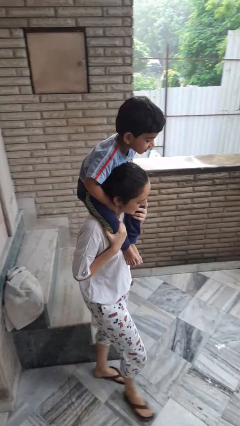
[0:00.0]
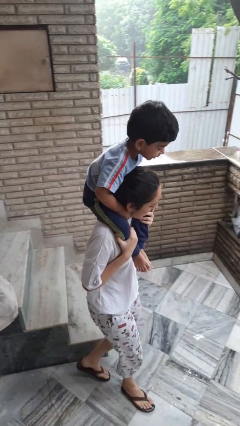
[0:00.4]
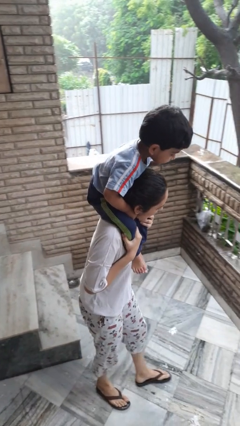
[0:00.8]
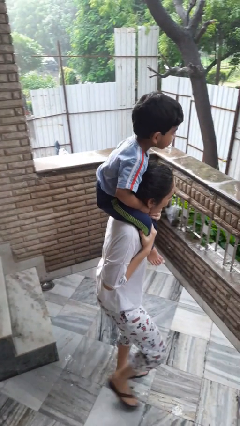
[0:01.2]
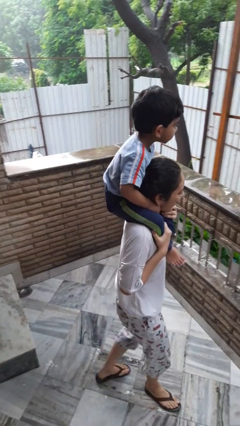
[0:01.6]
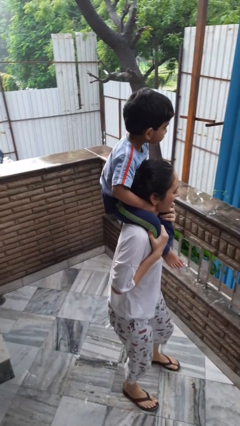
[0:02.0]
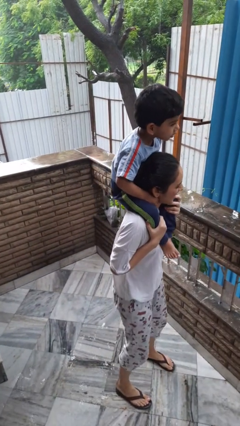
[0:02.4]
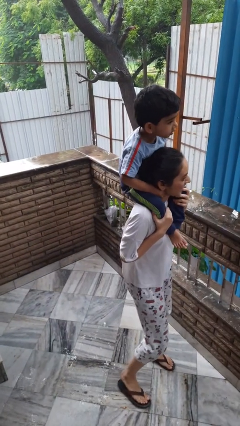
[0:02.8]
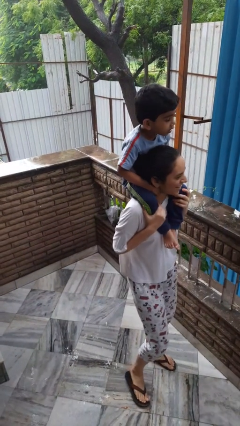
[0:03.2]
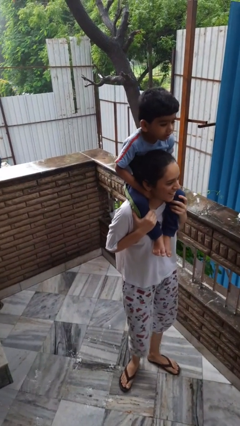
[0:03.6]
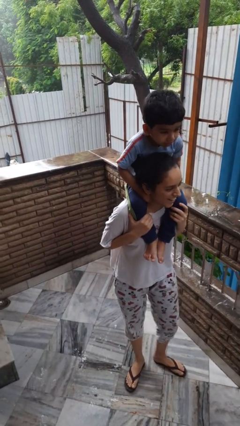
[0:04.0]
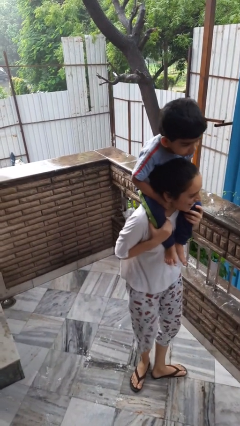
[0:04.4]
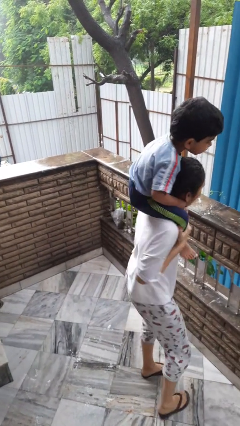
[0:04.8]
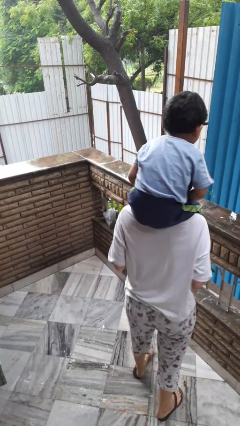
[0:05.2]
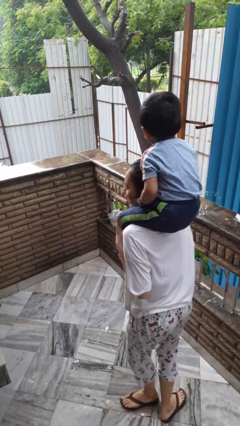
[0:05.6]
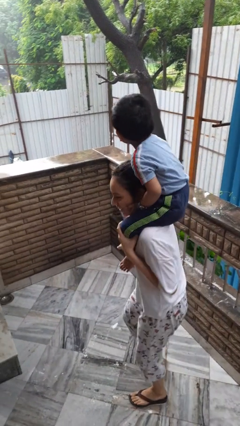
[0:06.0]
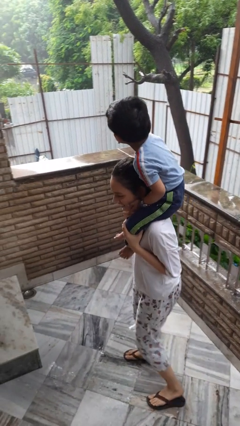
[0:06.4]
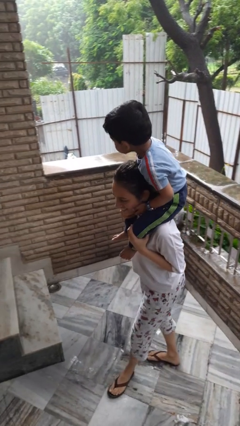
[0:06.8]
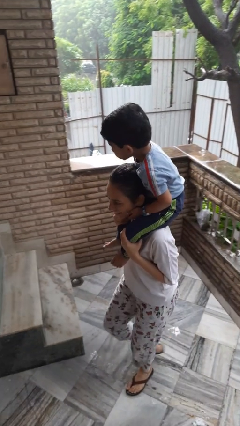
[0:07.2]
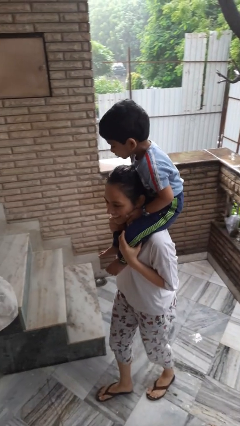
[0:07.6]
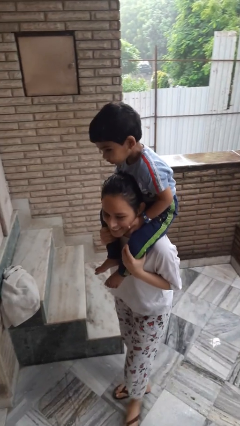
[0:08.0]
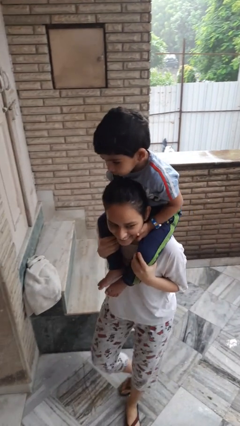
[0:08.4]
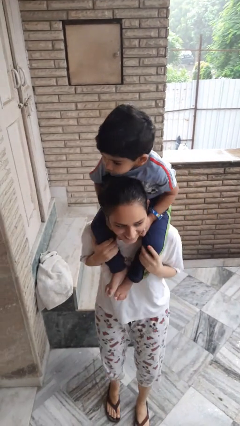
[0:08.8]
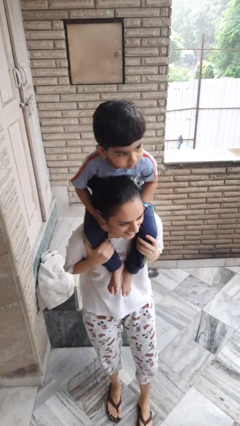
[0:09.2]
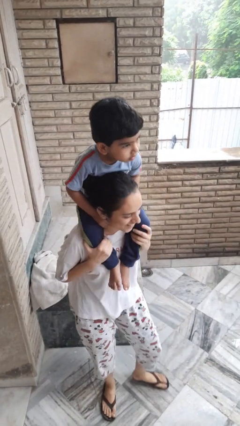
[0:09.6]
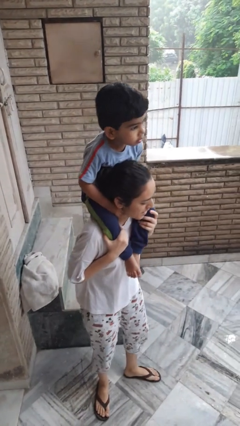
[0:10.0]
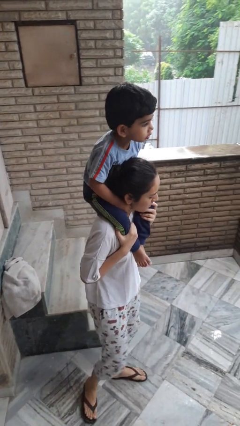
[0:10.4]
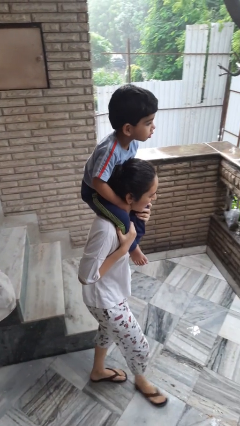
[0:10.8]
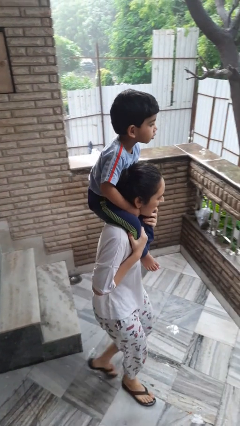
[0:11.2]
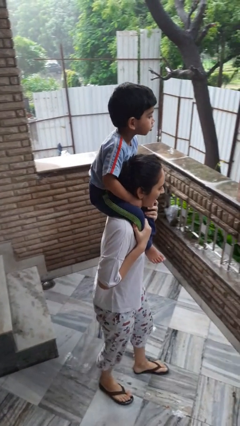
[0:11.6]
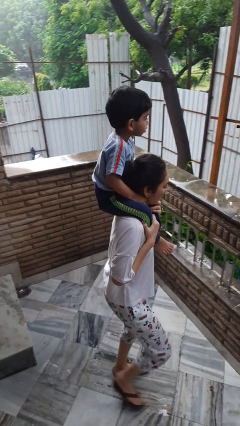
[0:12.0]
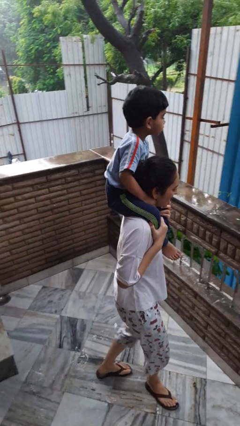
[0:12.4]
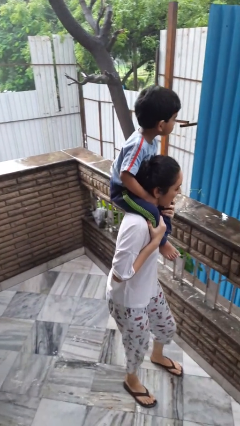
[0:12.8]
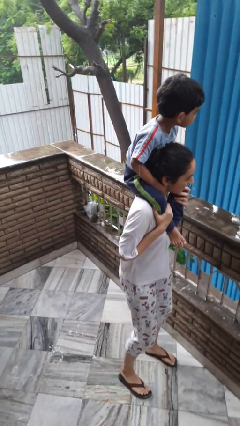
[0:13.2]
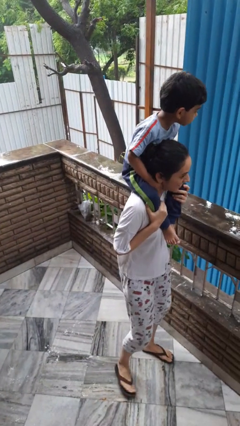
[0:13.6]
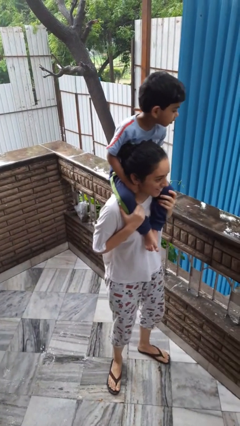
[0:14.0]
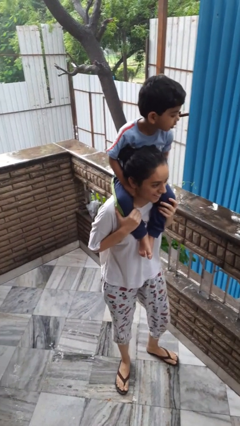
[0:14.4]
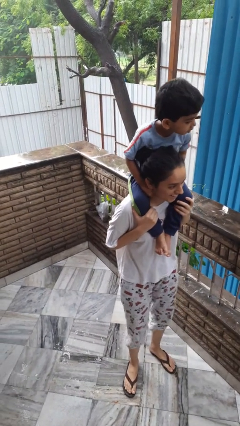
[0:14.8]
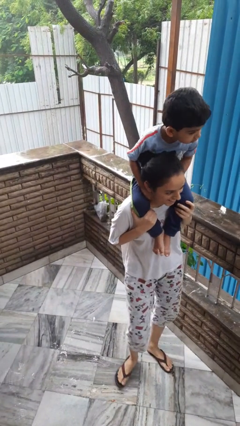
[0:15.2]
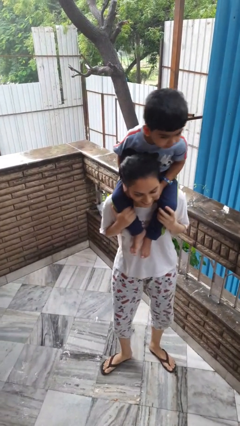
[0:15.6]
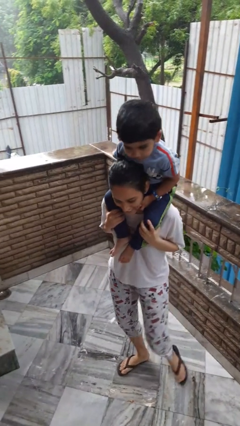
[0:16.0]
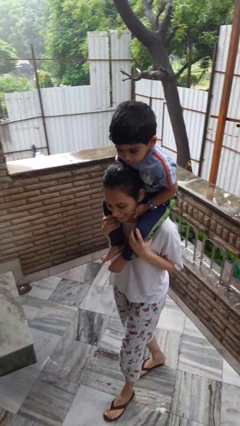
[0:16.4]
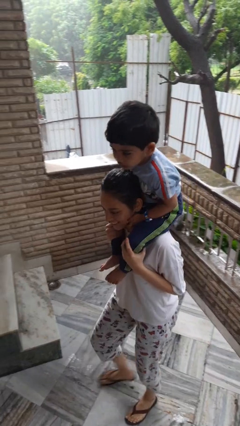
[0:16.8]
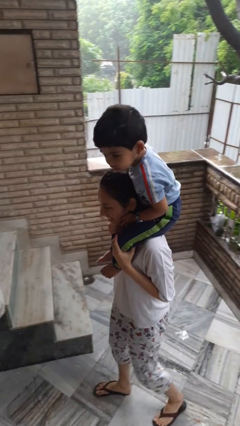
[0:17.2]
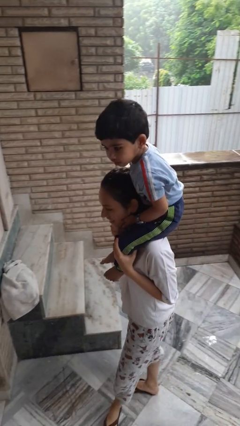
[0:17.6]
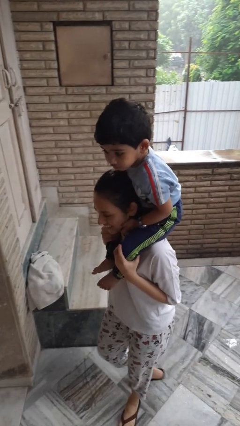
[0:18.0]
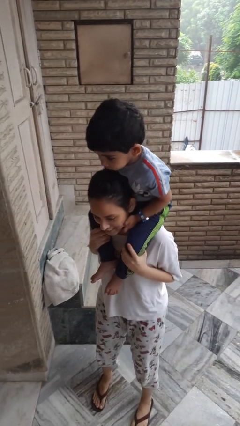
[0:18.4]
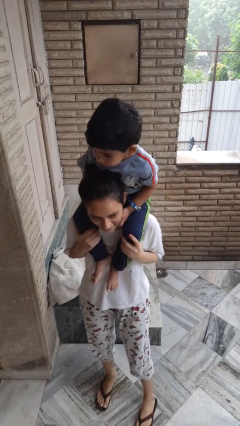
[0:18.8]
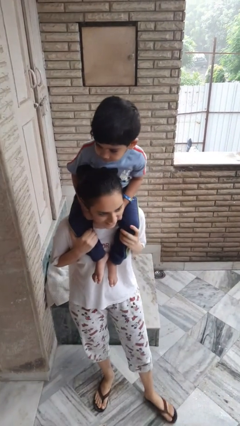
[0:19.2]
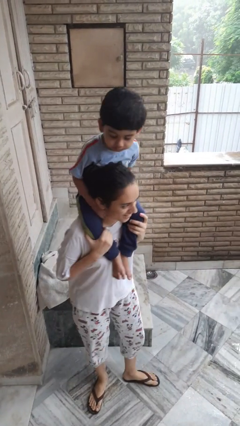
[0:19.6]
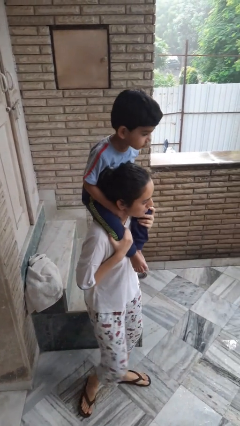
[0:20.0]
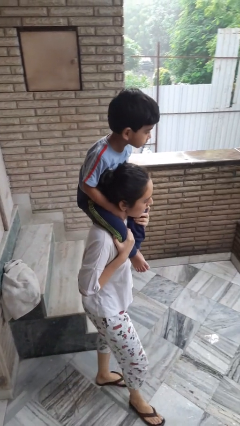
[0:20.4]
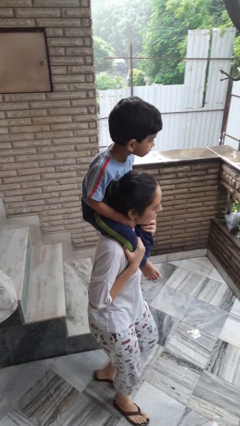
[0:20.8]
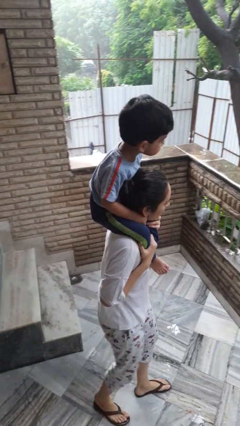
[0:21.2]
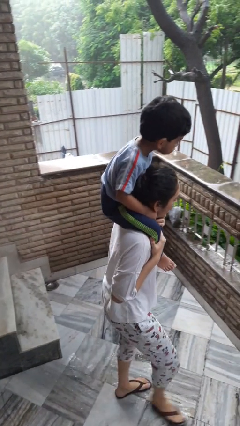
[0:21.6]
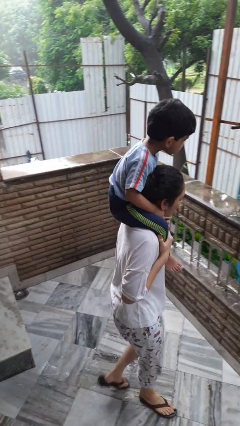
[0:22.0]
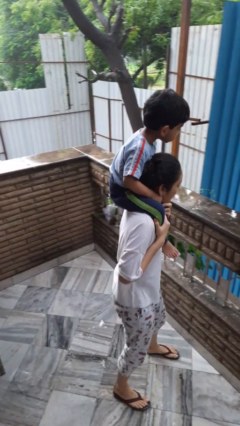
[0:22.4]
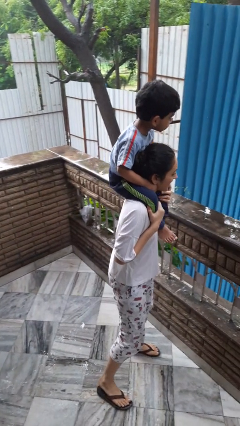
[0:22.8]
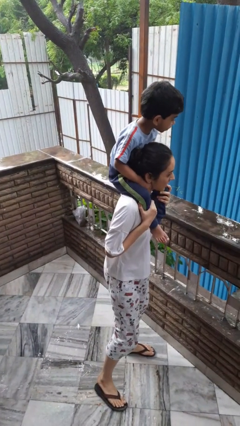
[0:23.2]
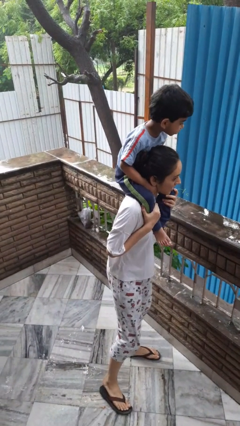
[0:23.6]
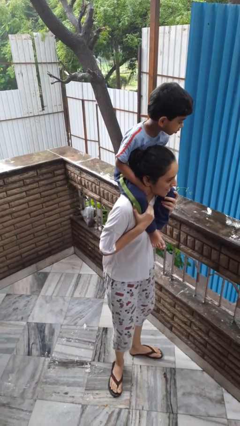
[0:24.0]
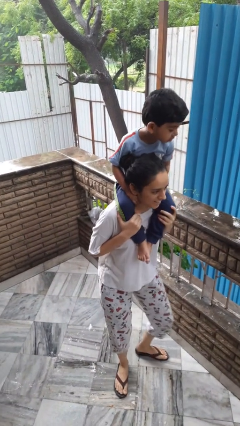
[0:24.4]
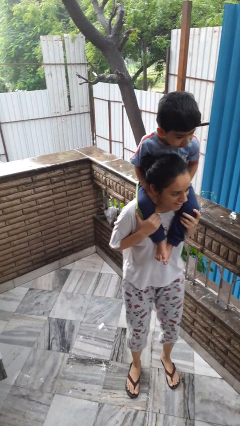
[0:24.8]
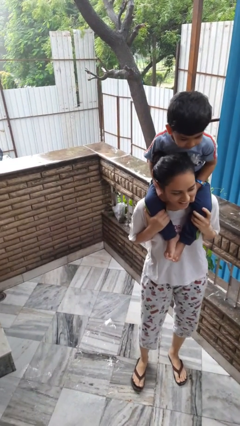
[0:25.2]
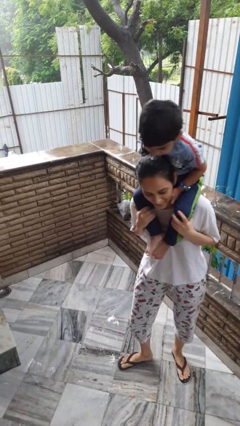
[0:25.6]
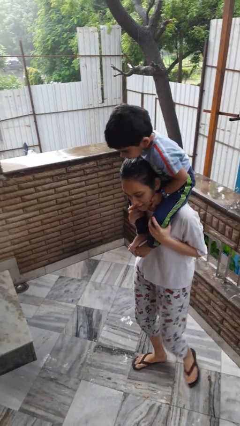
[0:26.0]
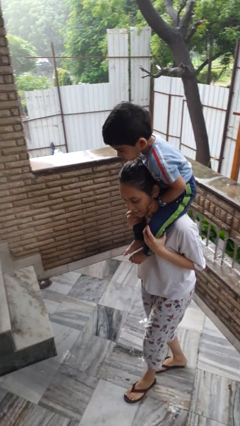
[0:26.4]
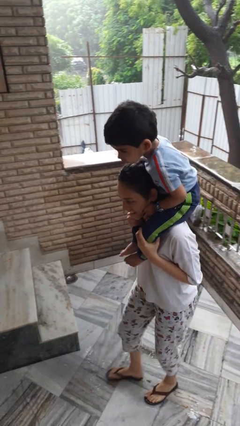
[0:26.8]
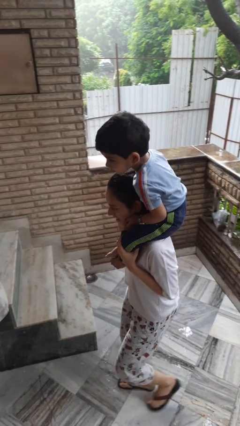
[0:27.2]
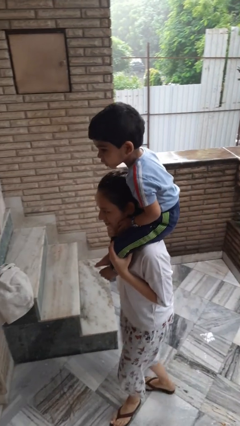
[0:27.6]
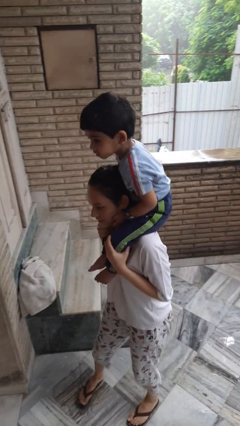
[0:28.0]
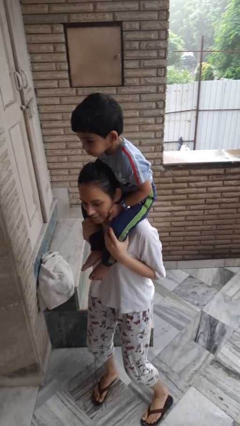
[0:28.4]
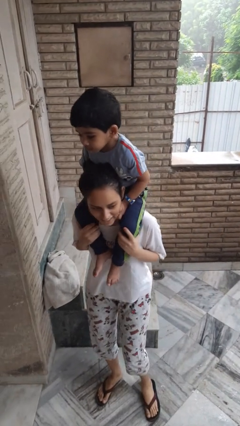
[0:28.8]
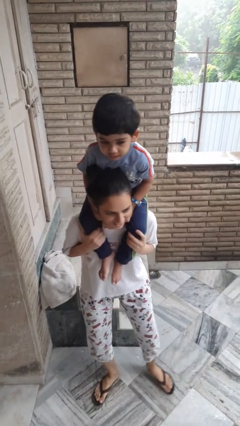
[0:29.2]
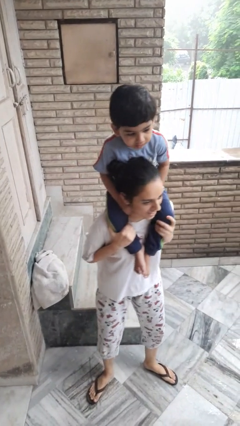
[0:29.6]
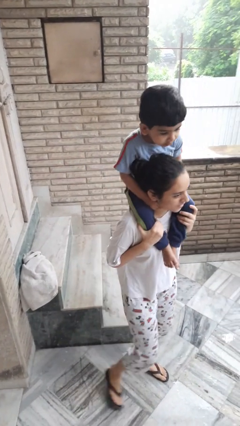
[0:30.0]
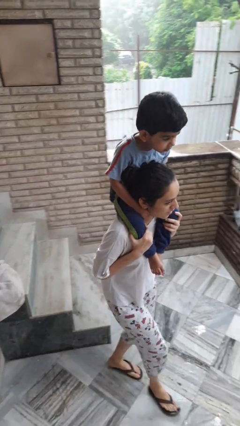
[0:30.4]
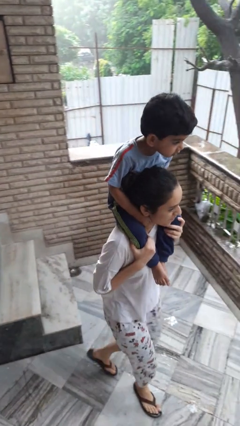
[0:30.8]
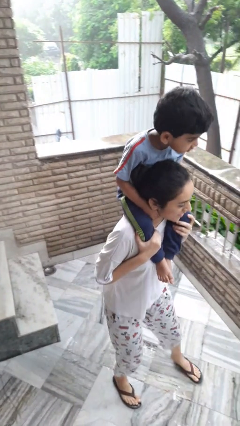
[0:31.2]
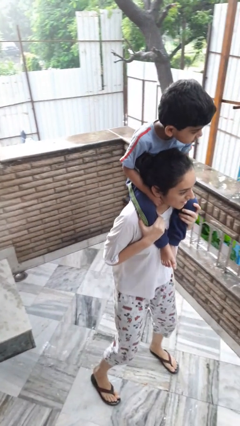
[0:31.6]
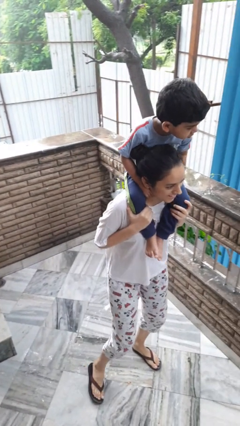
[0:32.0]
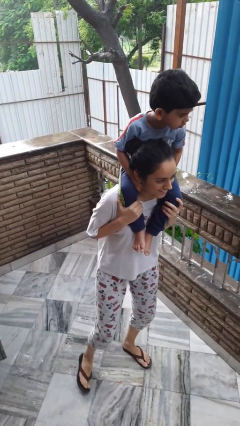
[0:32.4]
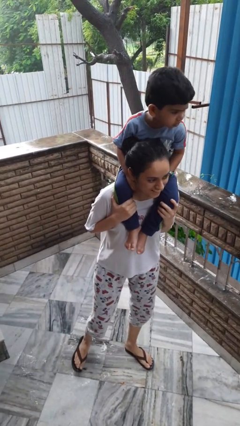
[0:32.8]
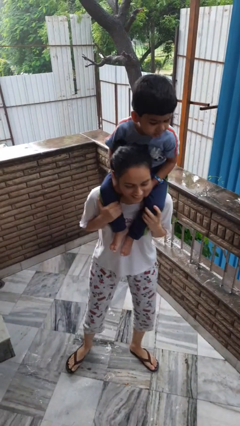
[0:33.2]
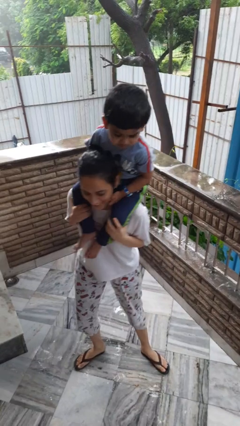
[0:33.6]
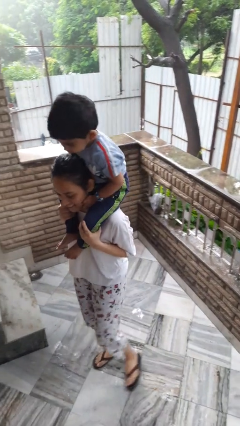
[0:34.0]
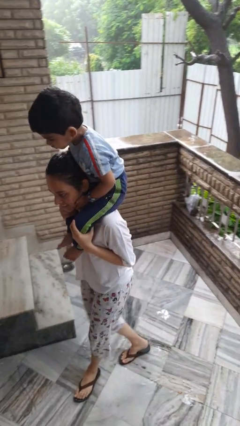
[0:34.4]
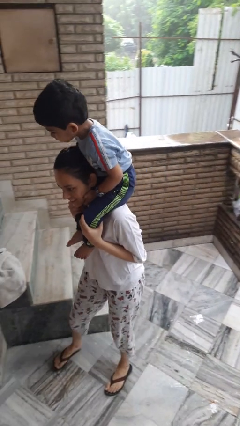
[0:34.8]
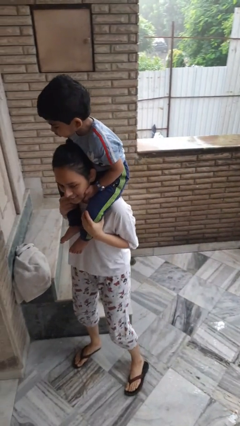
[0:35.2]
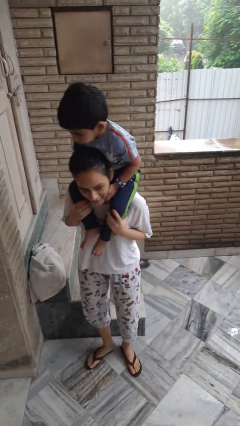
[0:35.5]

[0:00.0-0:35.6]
person carries person on shoulders
